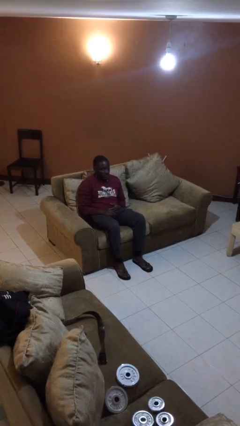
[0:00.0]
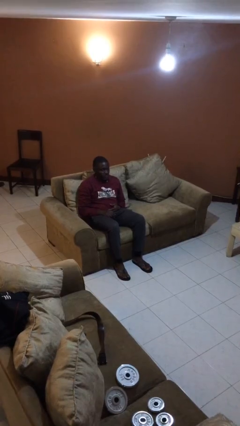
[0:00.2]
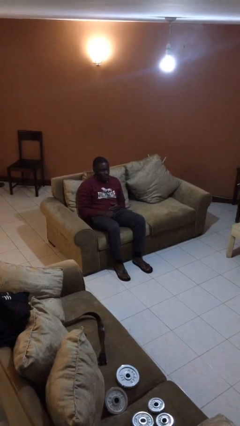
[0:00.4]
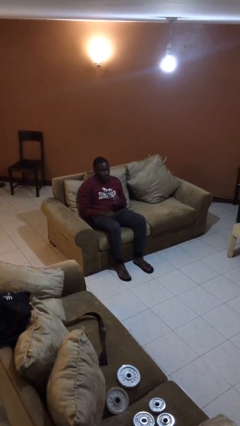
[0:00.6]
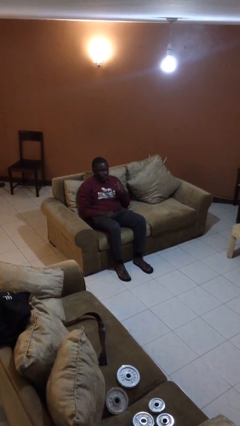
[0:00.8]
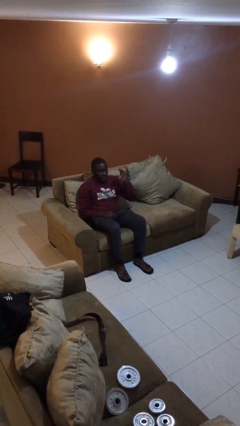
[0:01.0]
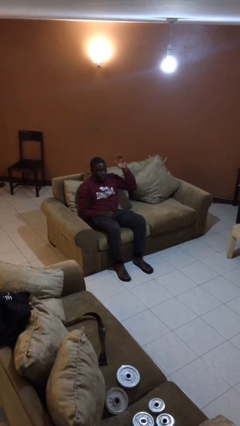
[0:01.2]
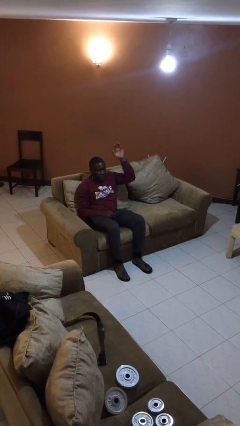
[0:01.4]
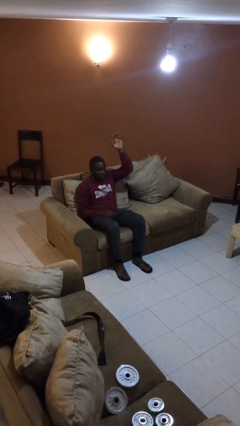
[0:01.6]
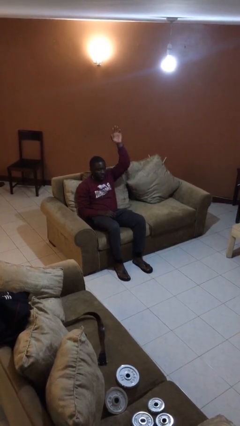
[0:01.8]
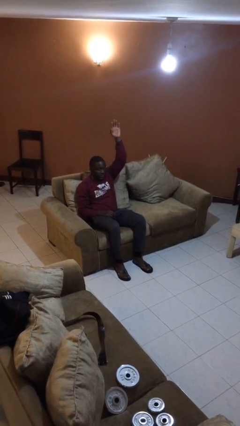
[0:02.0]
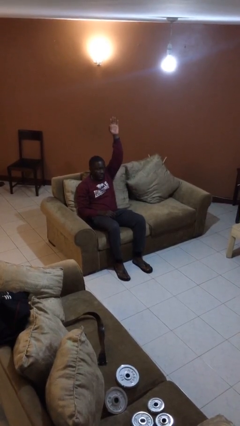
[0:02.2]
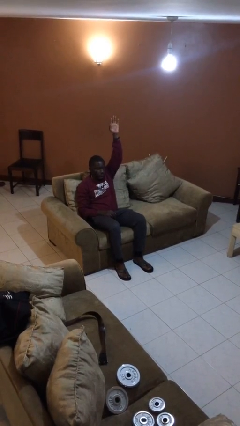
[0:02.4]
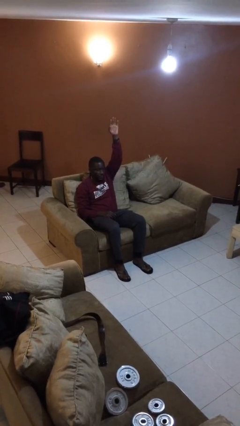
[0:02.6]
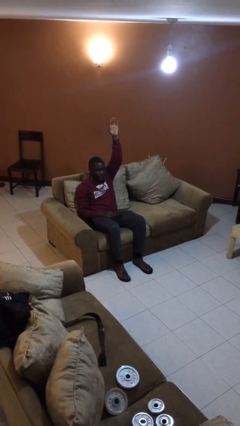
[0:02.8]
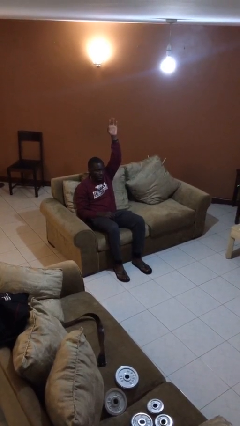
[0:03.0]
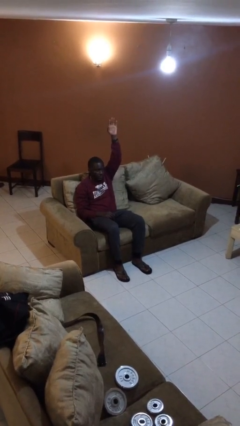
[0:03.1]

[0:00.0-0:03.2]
person gestures raise hand

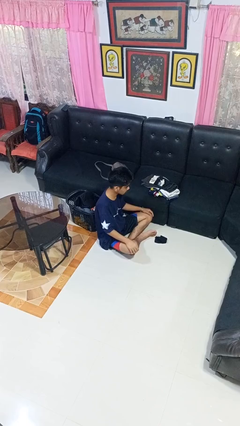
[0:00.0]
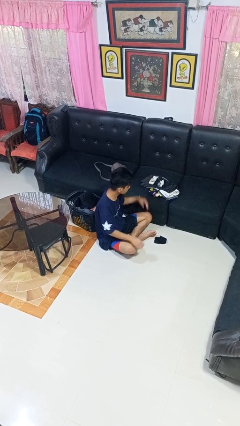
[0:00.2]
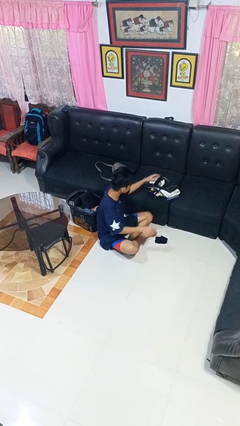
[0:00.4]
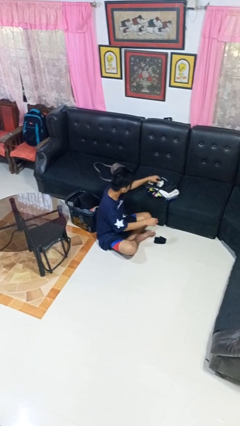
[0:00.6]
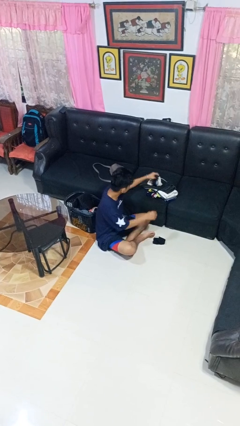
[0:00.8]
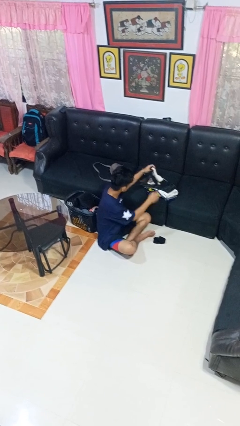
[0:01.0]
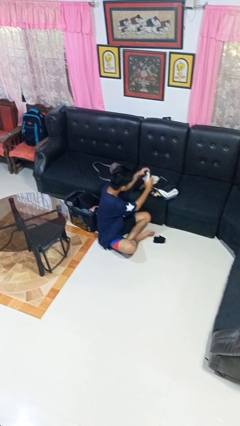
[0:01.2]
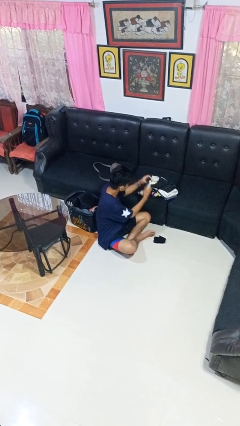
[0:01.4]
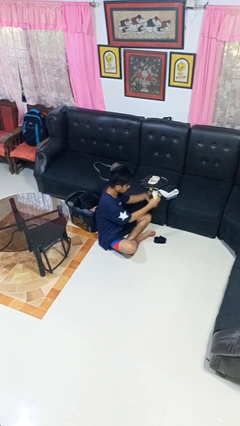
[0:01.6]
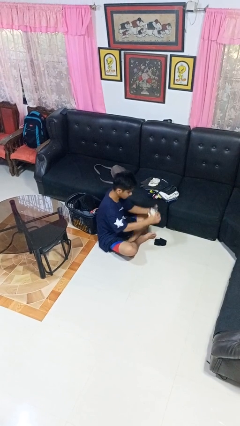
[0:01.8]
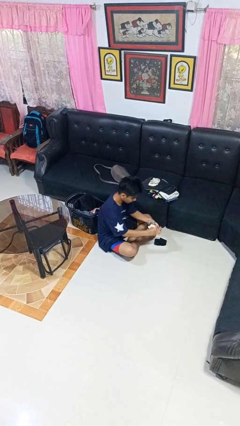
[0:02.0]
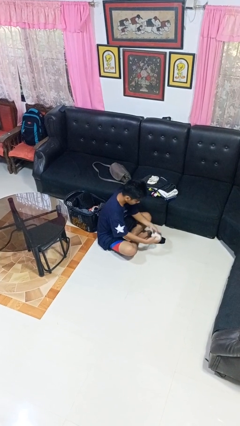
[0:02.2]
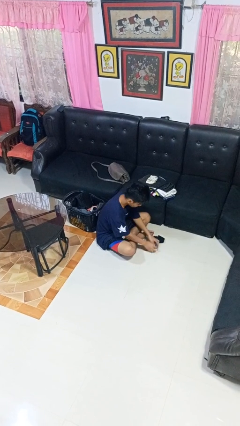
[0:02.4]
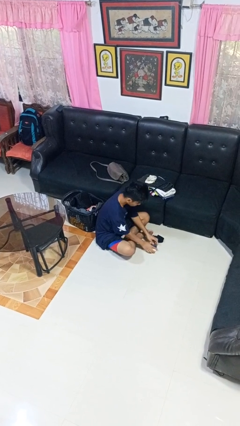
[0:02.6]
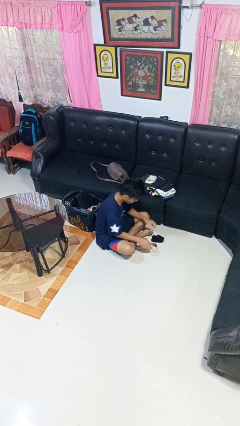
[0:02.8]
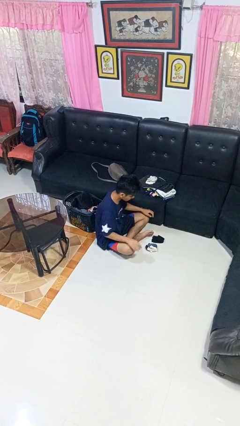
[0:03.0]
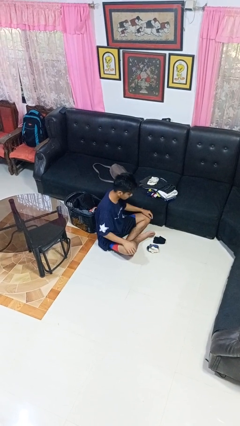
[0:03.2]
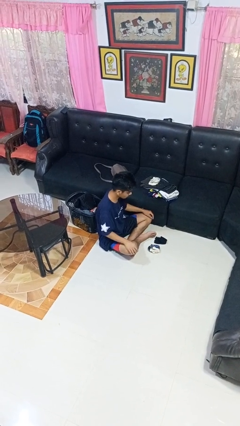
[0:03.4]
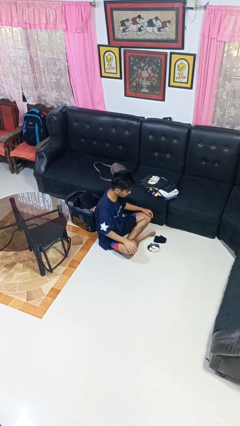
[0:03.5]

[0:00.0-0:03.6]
person folds socks

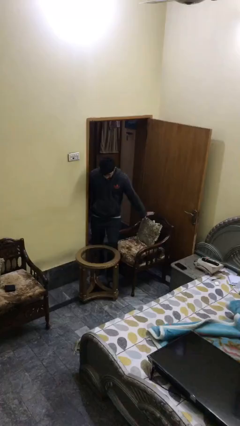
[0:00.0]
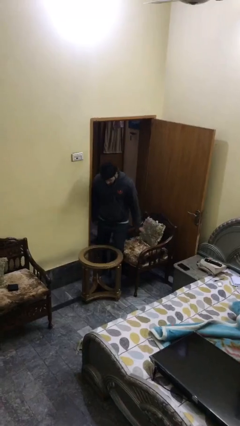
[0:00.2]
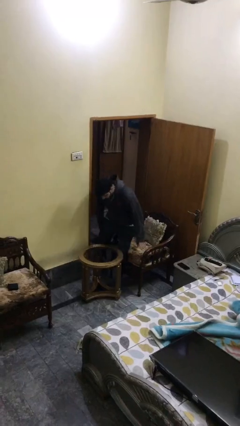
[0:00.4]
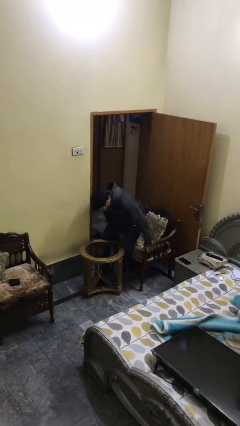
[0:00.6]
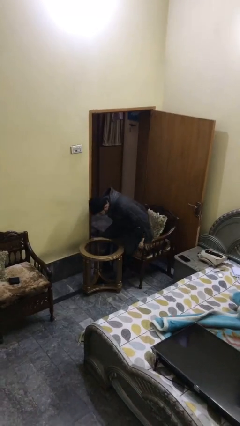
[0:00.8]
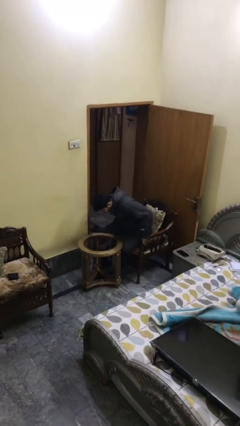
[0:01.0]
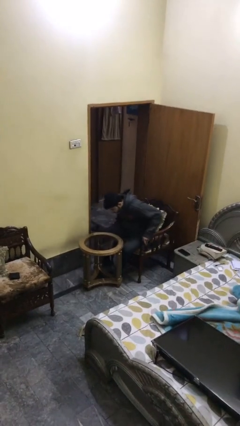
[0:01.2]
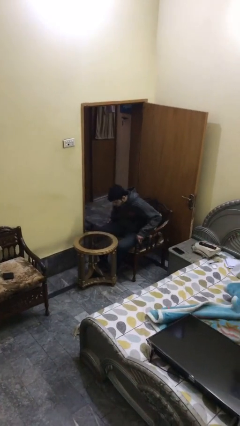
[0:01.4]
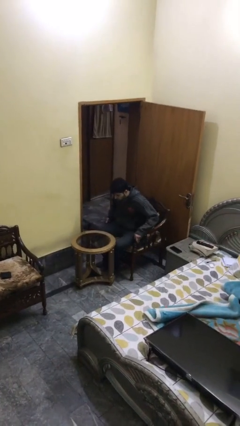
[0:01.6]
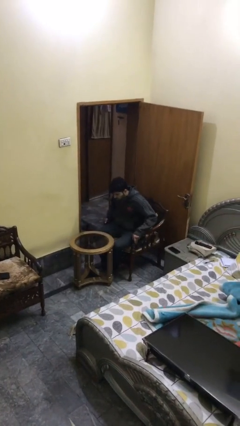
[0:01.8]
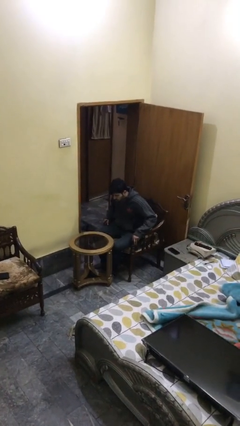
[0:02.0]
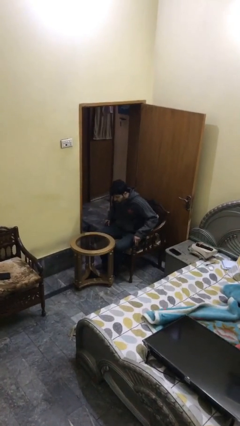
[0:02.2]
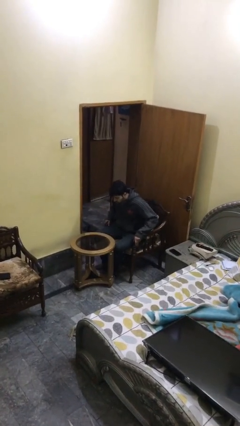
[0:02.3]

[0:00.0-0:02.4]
person sits down

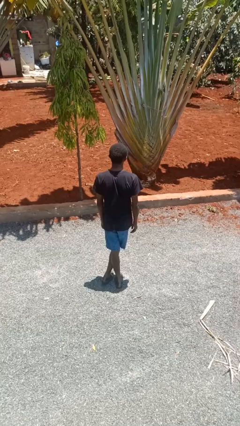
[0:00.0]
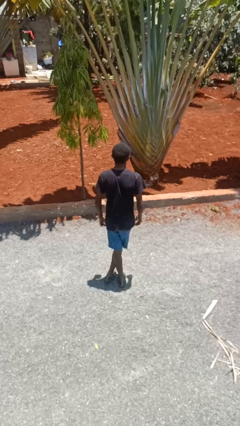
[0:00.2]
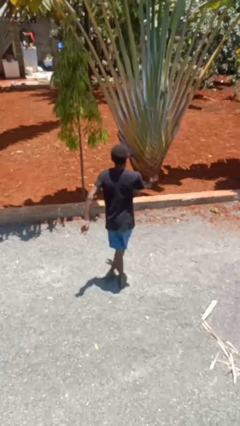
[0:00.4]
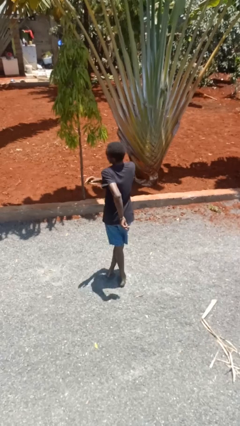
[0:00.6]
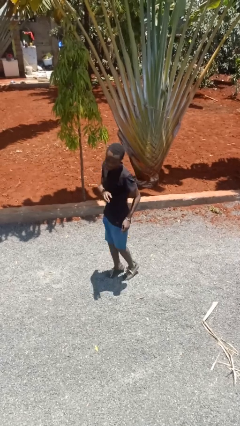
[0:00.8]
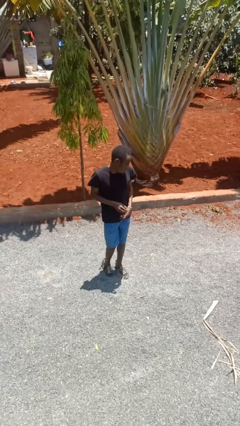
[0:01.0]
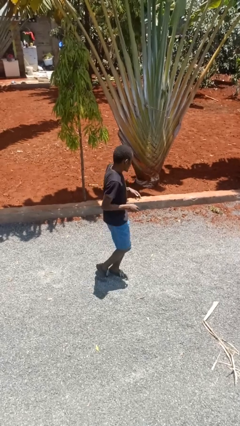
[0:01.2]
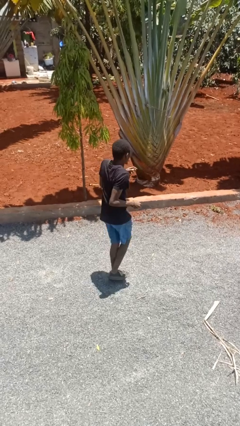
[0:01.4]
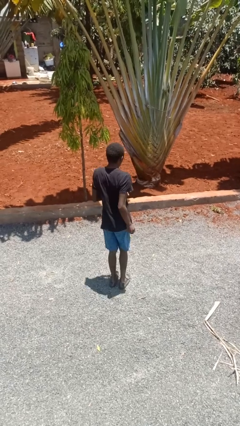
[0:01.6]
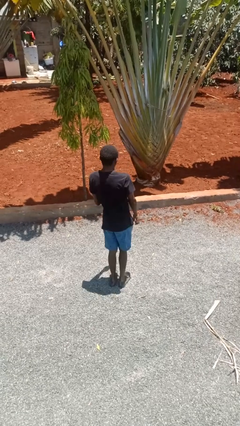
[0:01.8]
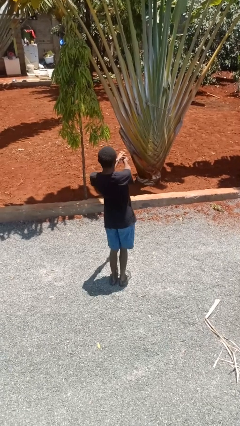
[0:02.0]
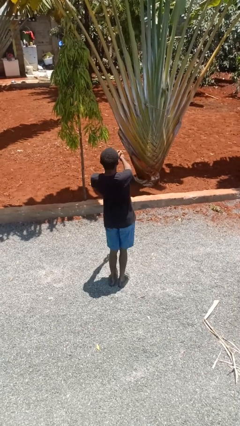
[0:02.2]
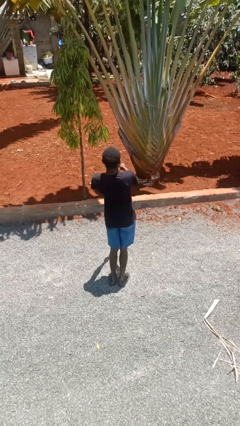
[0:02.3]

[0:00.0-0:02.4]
person twirls

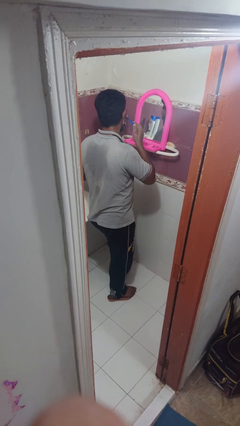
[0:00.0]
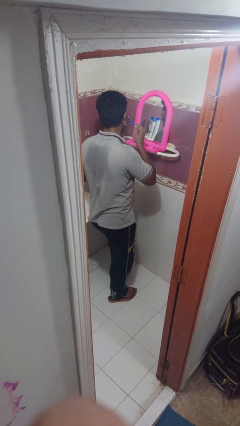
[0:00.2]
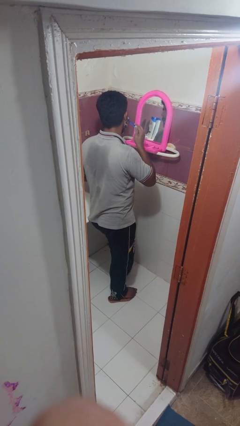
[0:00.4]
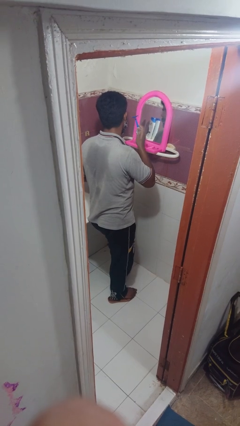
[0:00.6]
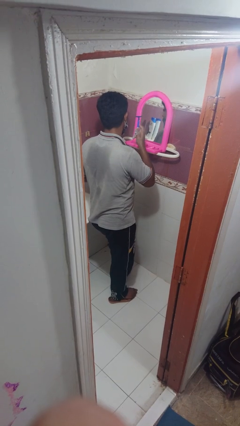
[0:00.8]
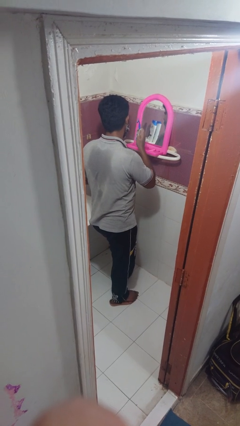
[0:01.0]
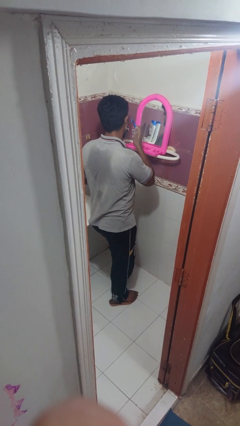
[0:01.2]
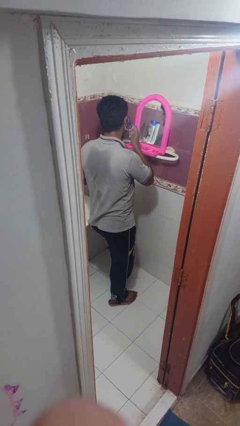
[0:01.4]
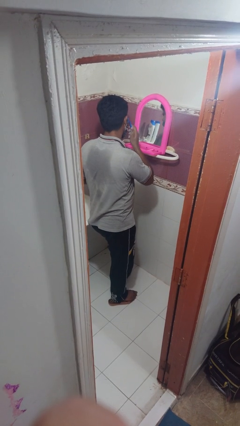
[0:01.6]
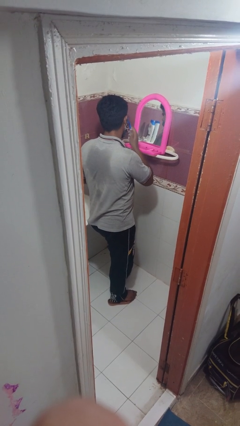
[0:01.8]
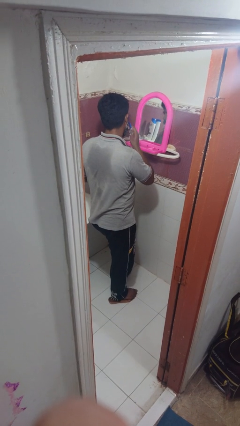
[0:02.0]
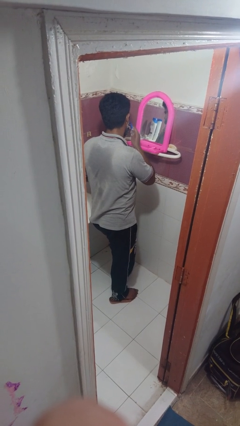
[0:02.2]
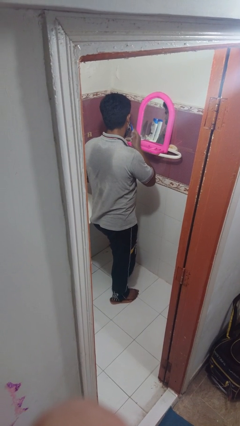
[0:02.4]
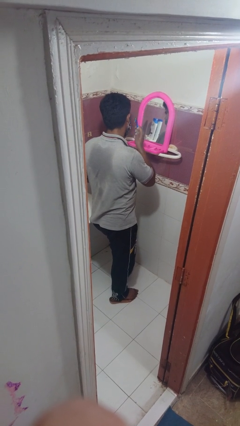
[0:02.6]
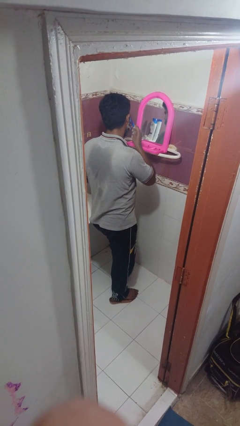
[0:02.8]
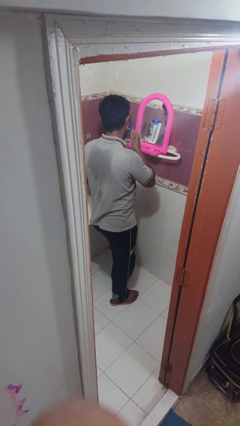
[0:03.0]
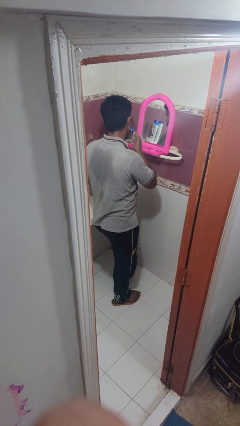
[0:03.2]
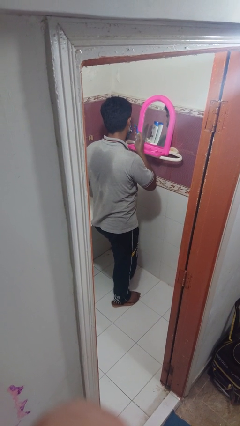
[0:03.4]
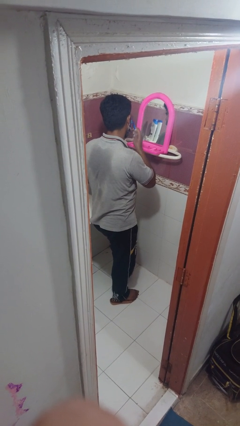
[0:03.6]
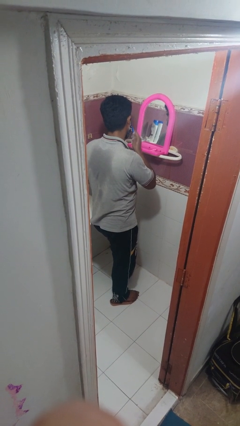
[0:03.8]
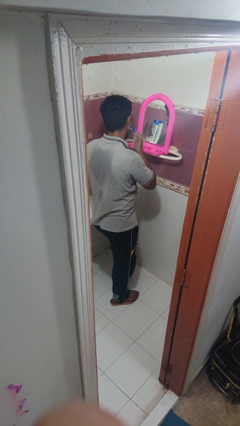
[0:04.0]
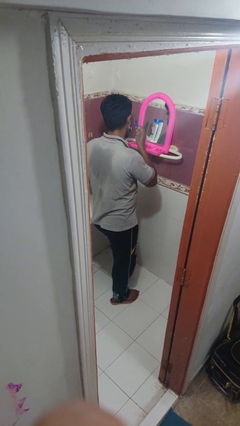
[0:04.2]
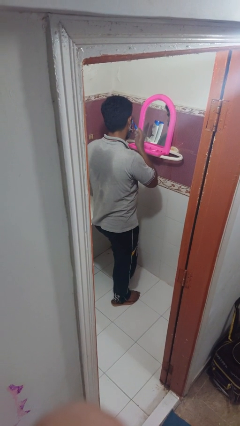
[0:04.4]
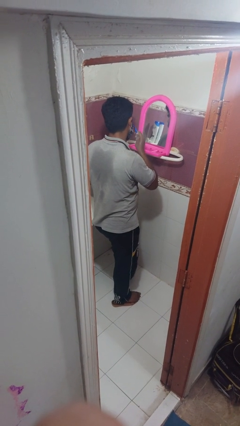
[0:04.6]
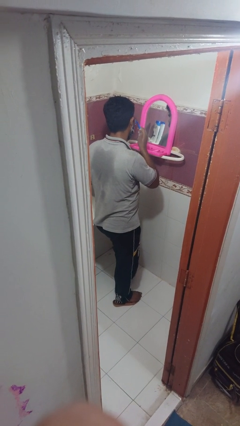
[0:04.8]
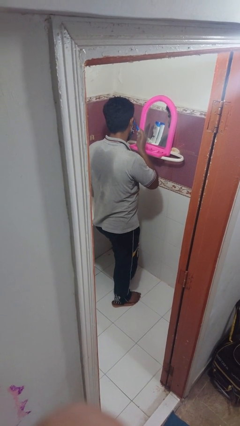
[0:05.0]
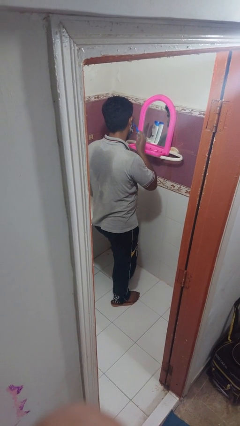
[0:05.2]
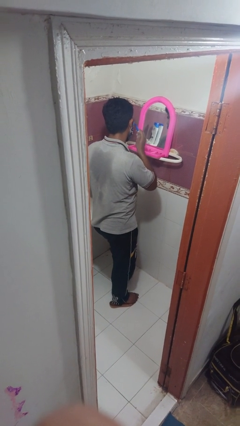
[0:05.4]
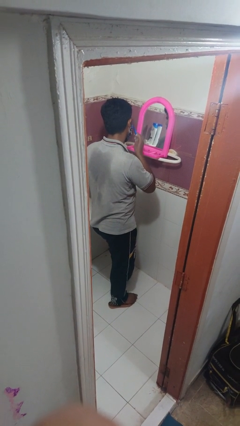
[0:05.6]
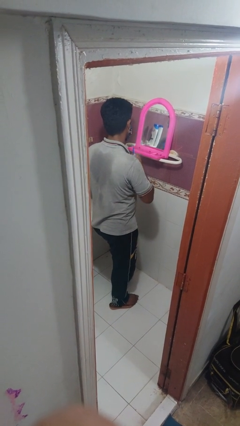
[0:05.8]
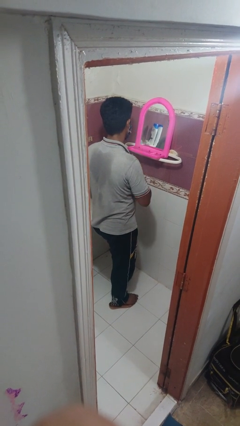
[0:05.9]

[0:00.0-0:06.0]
person shaves face
